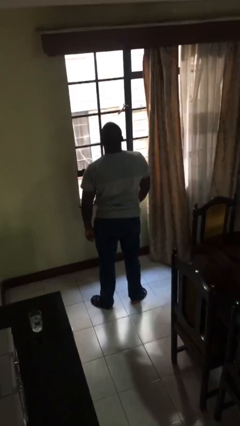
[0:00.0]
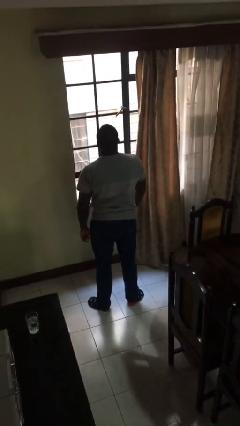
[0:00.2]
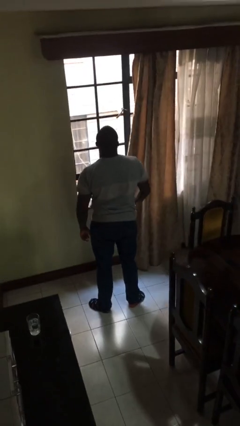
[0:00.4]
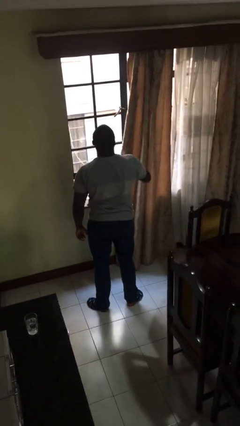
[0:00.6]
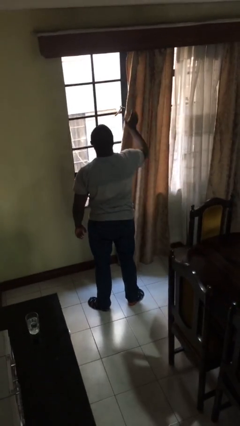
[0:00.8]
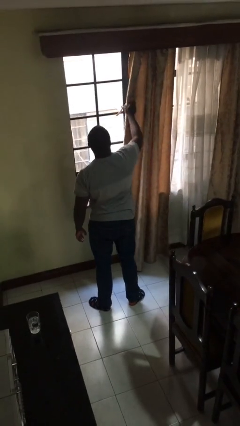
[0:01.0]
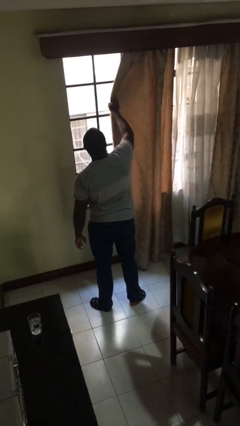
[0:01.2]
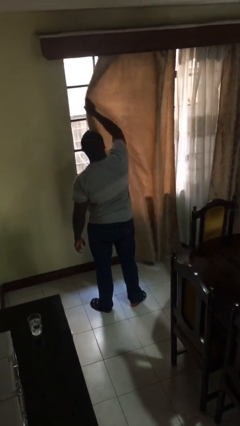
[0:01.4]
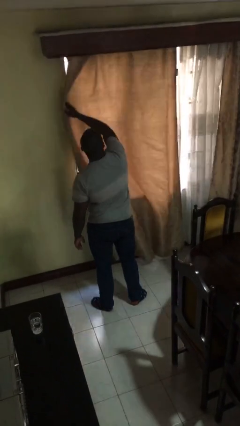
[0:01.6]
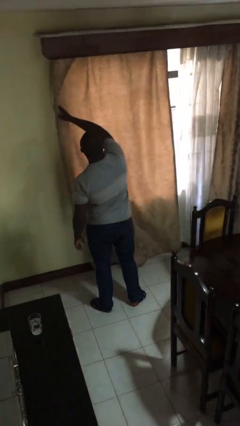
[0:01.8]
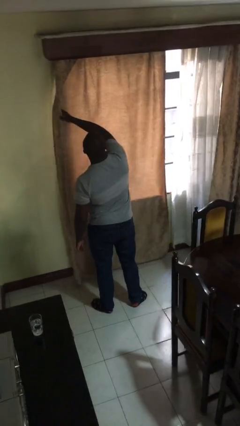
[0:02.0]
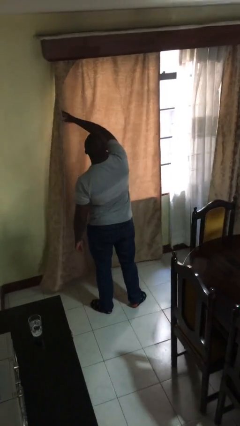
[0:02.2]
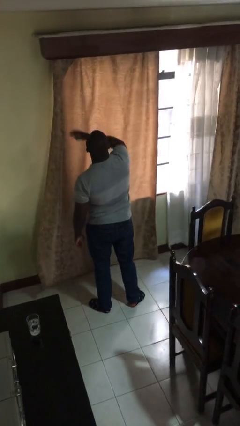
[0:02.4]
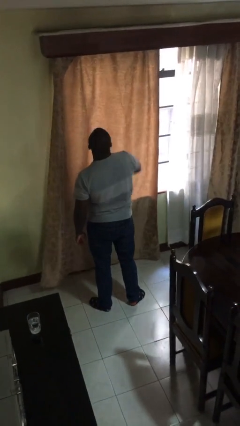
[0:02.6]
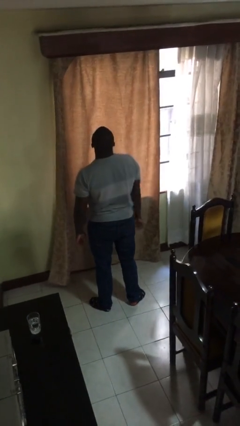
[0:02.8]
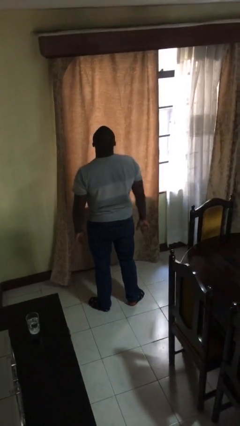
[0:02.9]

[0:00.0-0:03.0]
person closes curtains

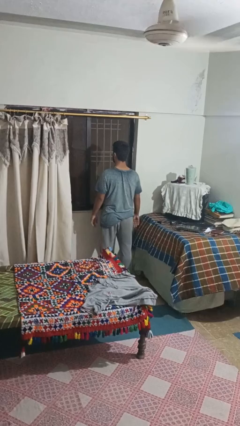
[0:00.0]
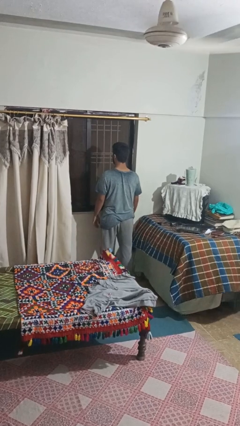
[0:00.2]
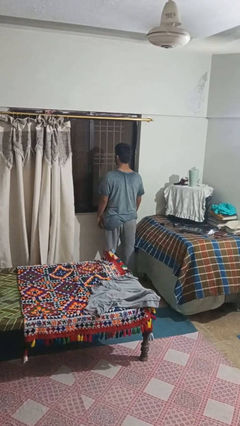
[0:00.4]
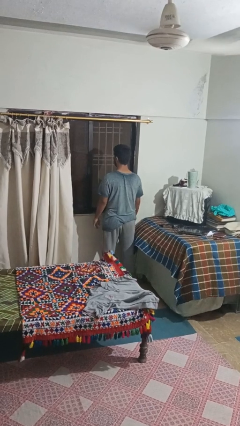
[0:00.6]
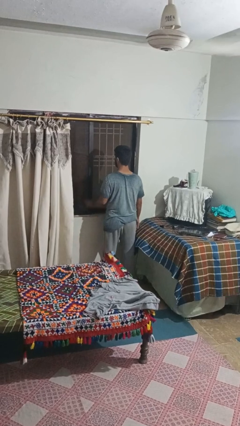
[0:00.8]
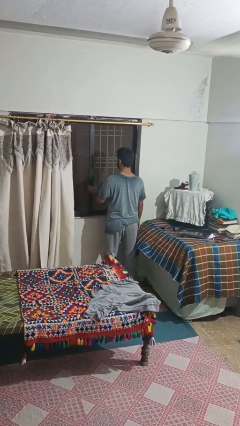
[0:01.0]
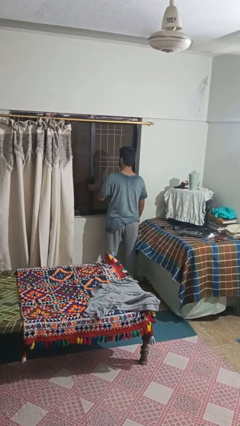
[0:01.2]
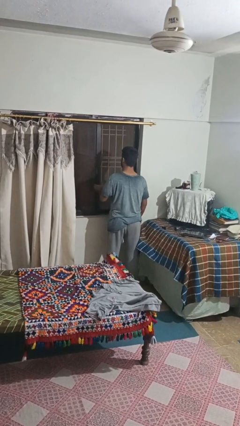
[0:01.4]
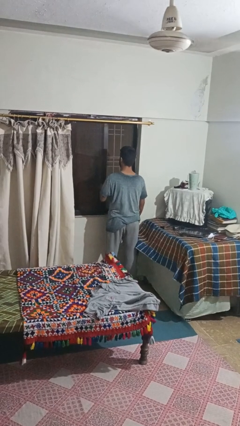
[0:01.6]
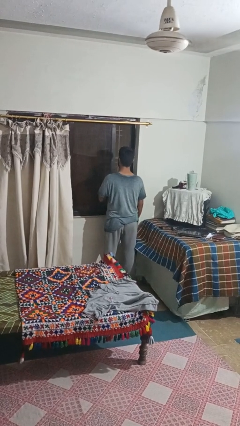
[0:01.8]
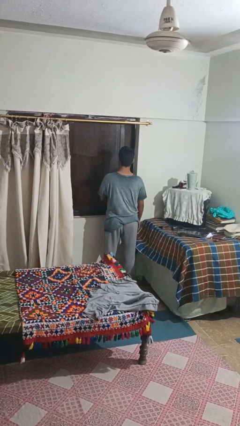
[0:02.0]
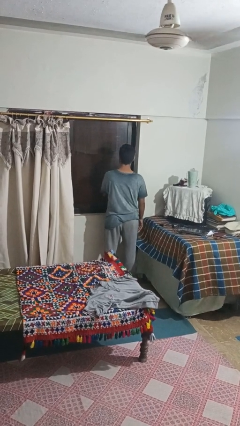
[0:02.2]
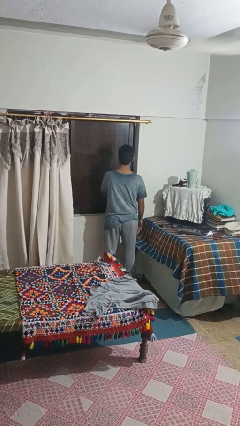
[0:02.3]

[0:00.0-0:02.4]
person closes home window

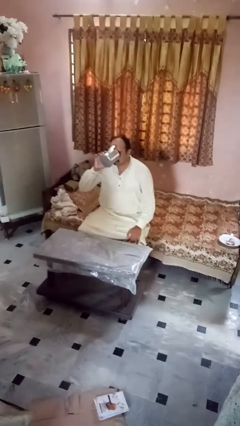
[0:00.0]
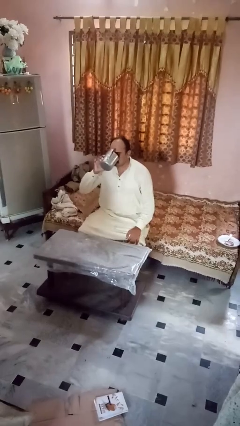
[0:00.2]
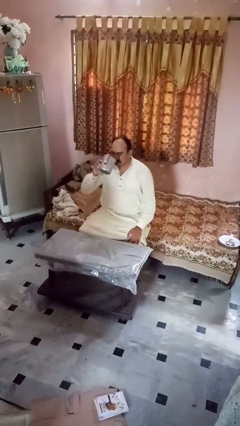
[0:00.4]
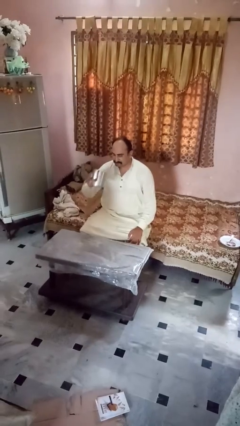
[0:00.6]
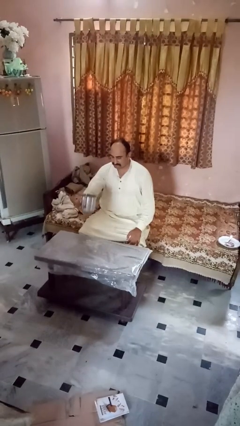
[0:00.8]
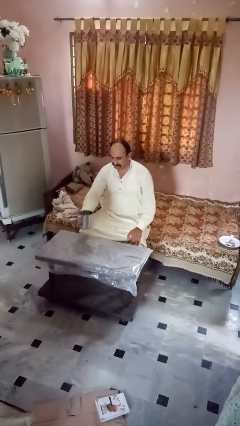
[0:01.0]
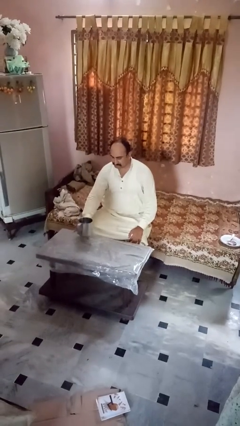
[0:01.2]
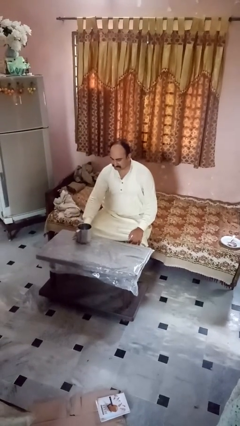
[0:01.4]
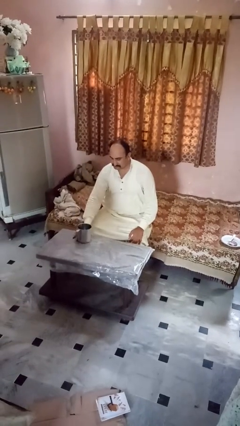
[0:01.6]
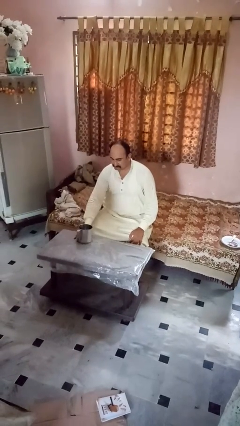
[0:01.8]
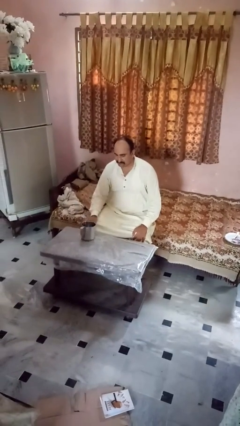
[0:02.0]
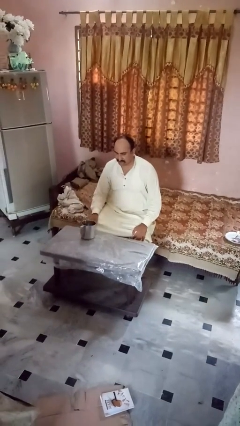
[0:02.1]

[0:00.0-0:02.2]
person puts down object on table

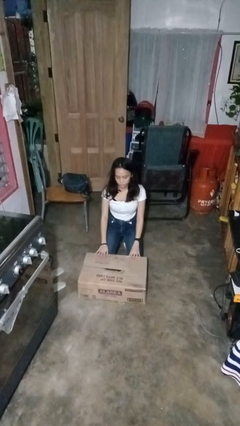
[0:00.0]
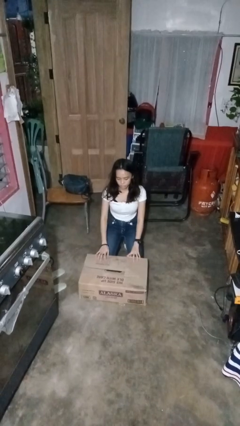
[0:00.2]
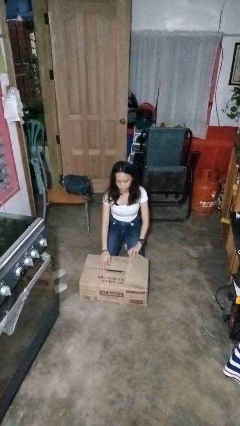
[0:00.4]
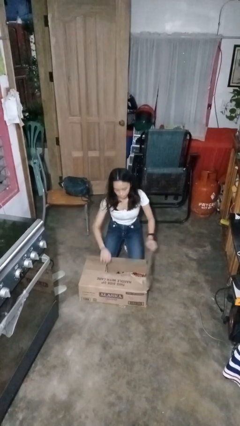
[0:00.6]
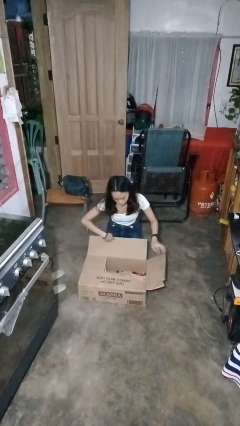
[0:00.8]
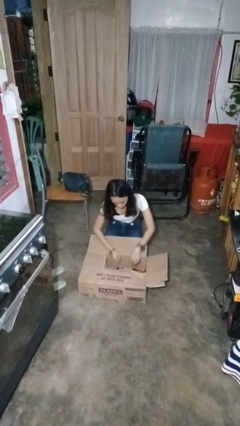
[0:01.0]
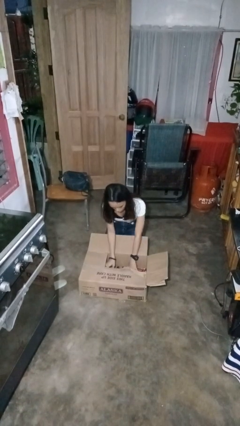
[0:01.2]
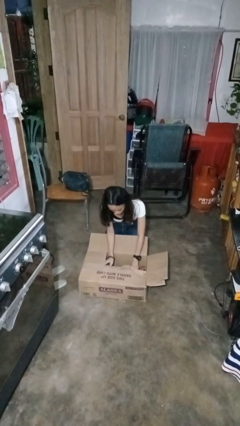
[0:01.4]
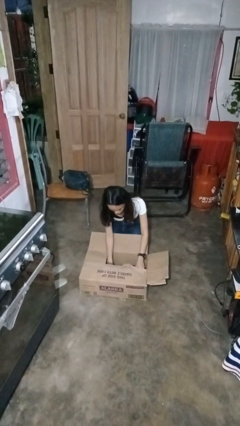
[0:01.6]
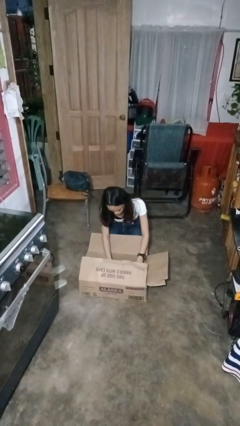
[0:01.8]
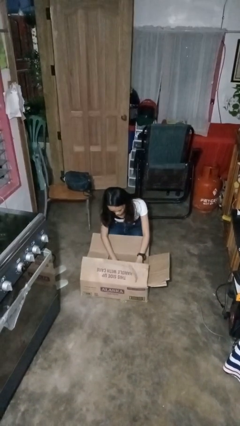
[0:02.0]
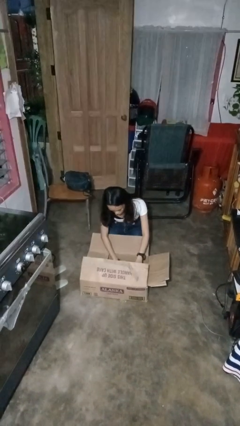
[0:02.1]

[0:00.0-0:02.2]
person searches in box

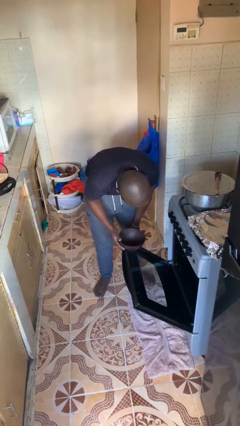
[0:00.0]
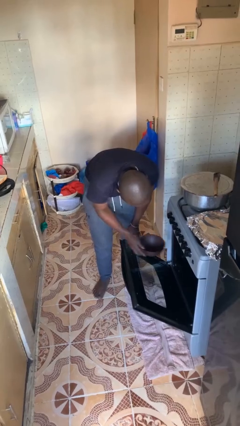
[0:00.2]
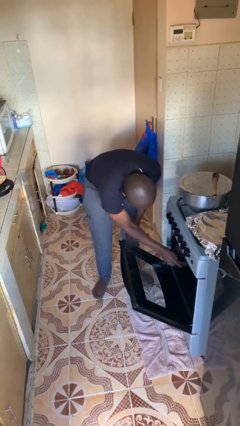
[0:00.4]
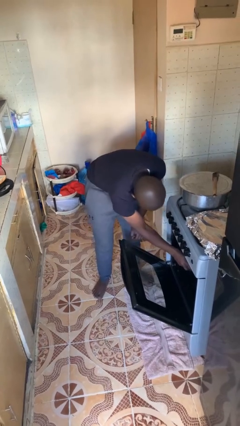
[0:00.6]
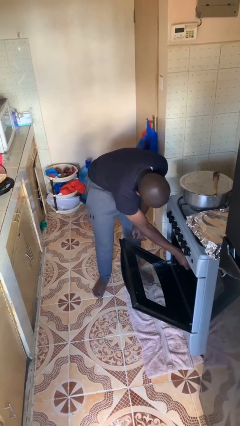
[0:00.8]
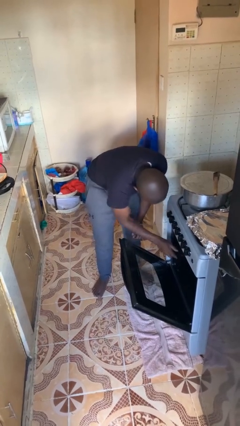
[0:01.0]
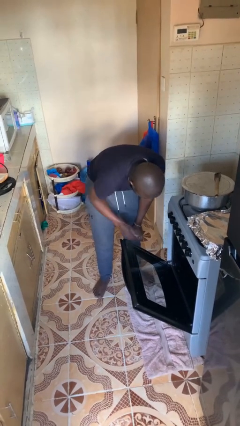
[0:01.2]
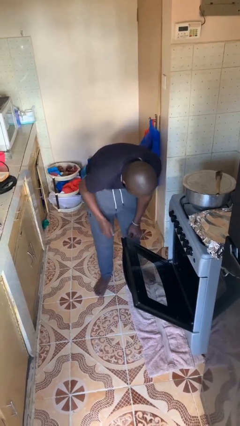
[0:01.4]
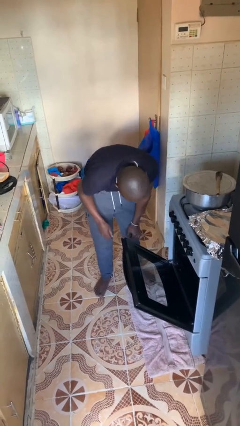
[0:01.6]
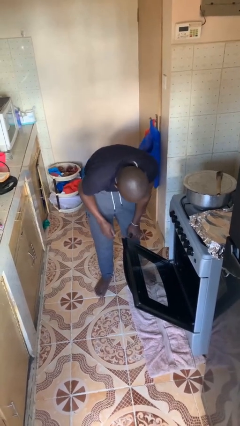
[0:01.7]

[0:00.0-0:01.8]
person puts object into oven

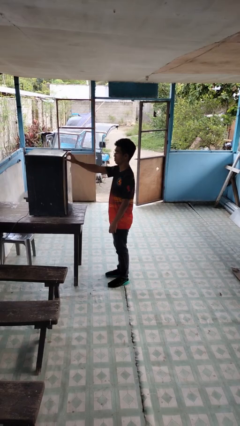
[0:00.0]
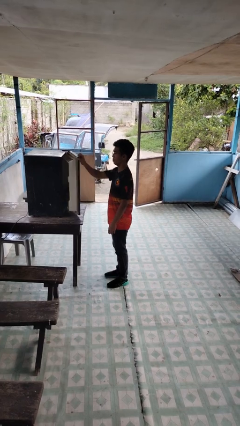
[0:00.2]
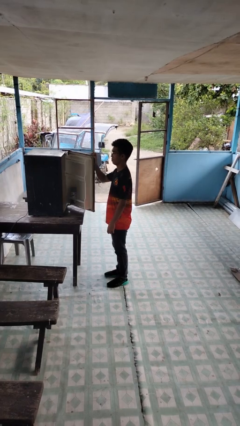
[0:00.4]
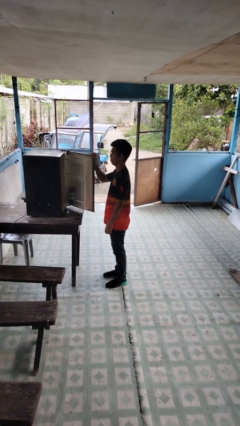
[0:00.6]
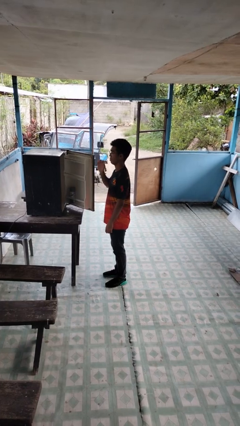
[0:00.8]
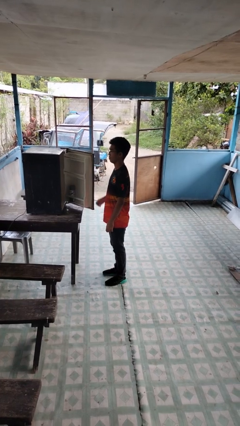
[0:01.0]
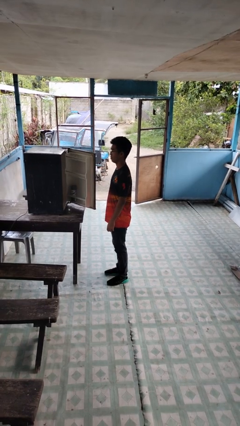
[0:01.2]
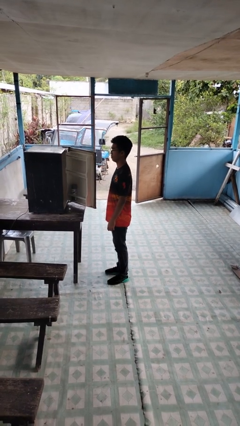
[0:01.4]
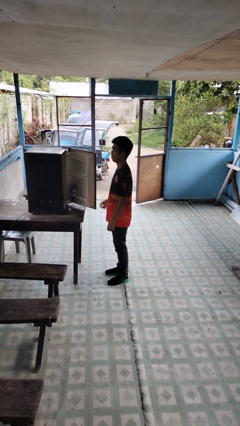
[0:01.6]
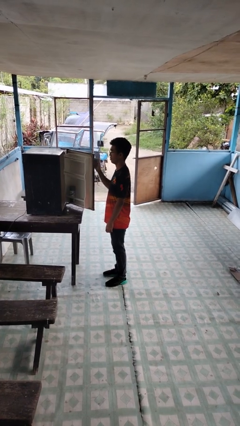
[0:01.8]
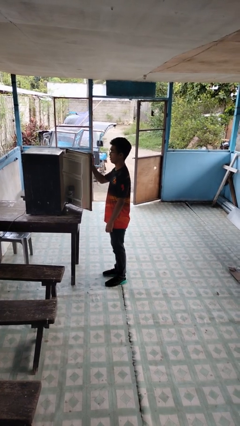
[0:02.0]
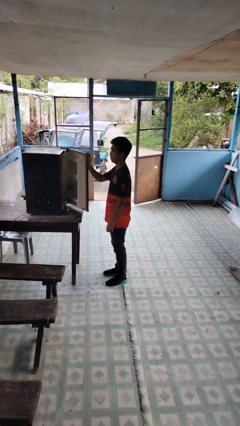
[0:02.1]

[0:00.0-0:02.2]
person opens refrigerator

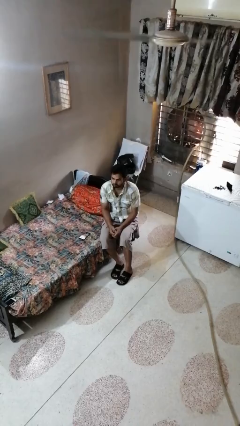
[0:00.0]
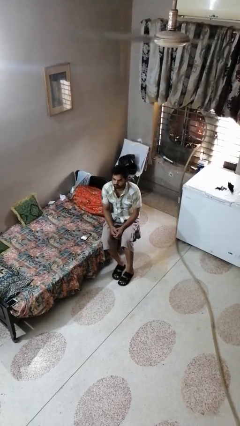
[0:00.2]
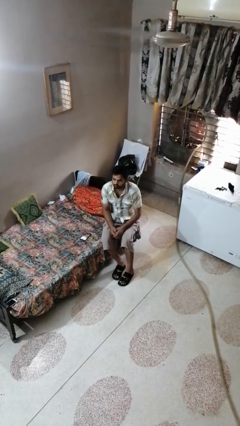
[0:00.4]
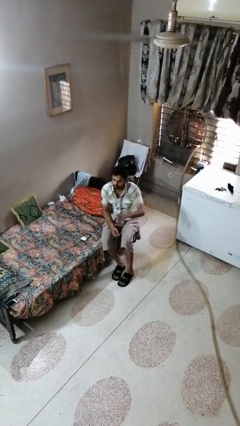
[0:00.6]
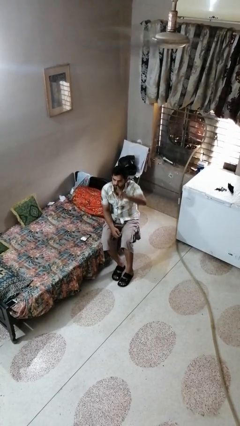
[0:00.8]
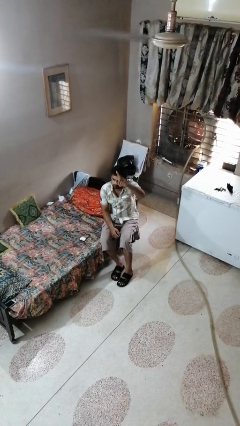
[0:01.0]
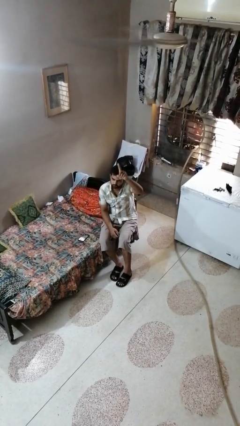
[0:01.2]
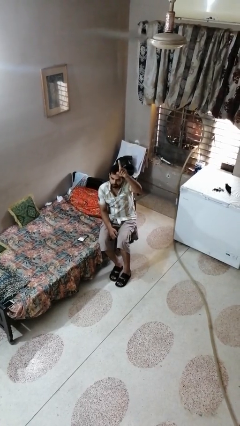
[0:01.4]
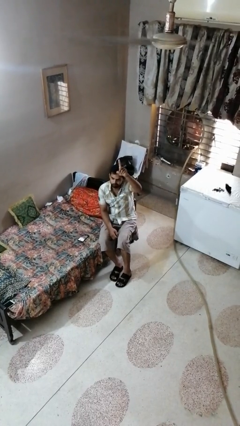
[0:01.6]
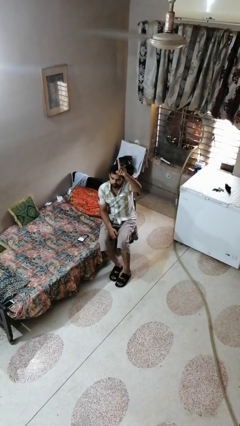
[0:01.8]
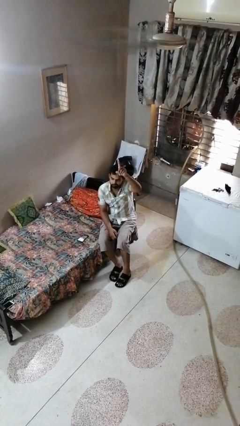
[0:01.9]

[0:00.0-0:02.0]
person gestures raise hand

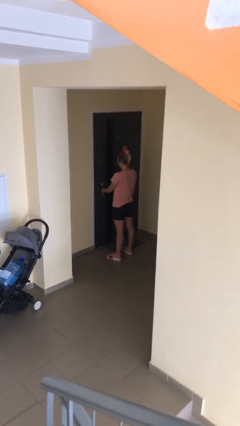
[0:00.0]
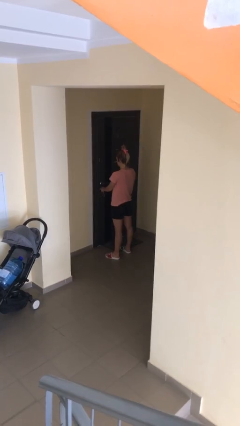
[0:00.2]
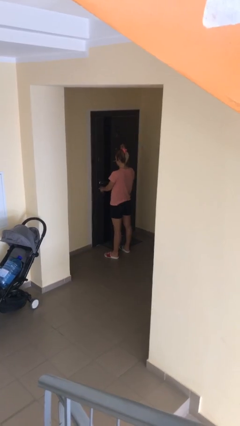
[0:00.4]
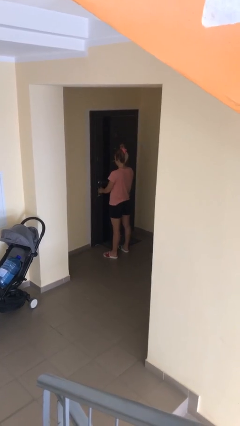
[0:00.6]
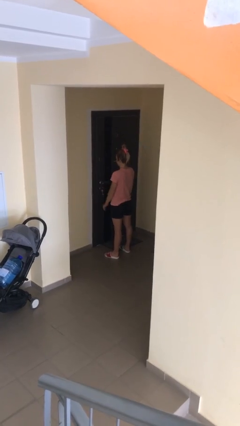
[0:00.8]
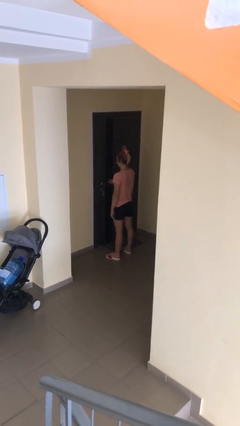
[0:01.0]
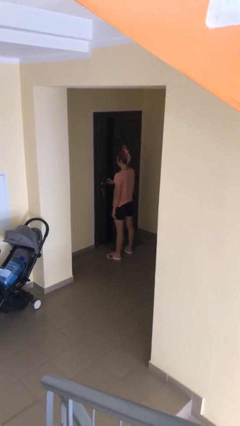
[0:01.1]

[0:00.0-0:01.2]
person unlocks door with keys
